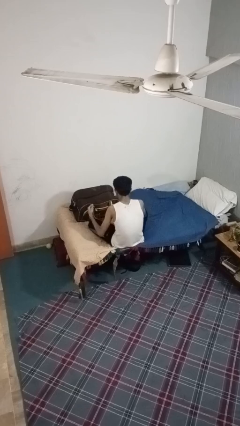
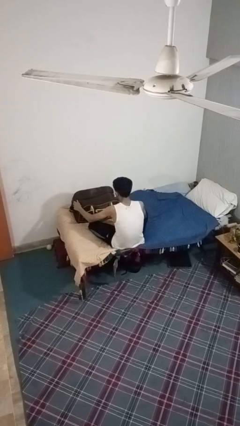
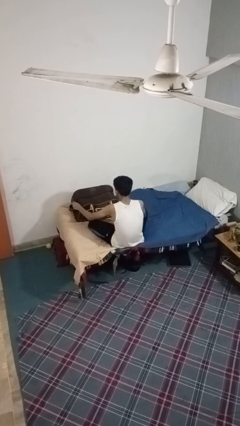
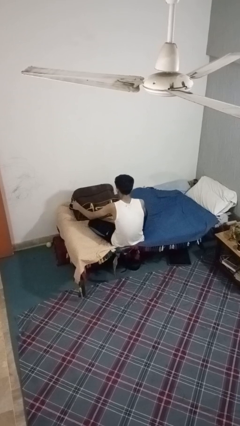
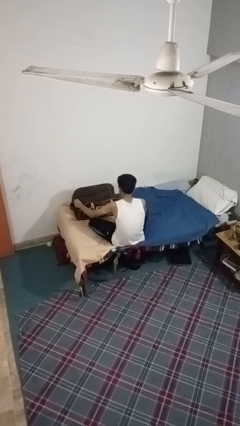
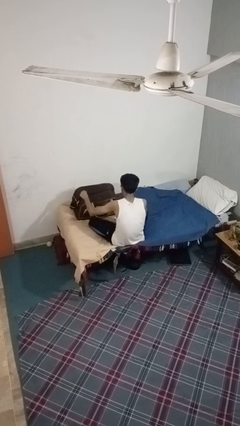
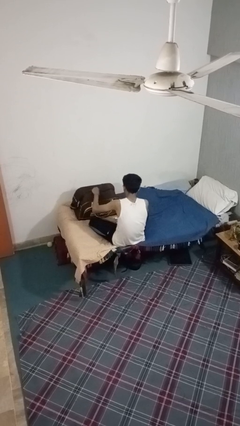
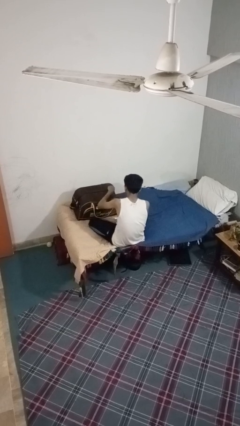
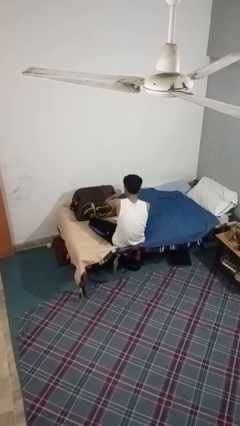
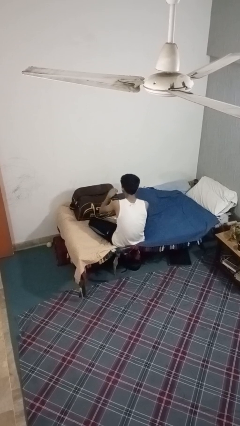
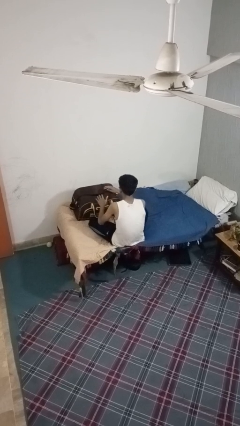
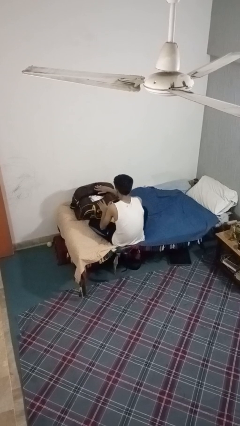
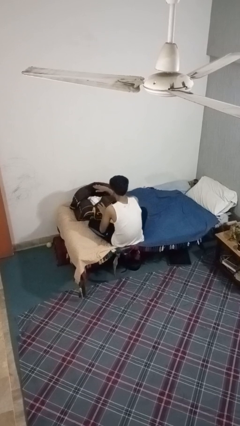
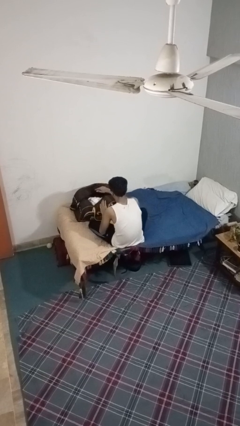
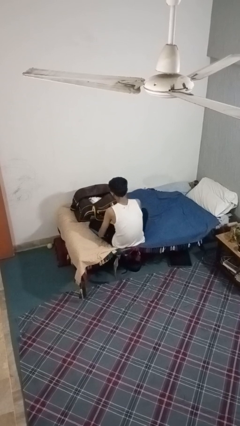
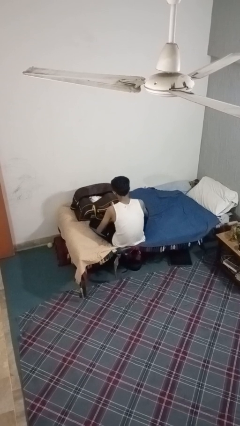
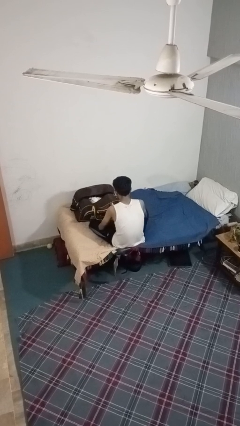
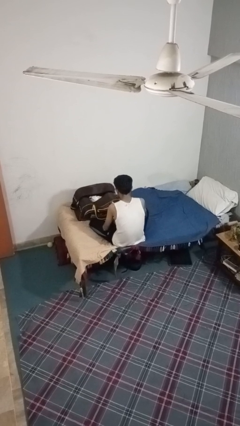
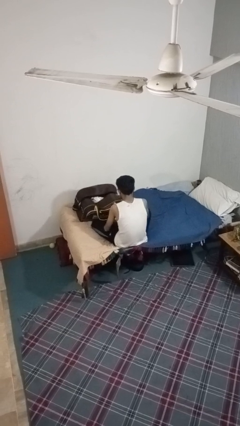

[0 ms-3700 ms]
person opens suitcase

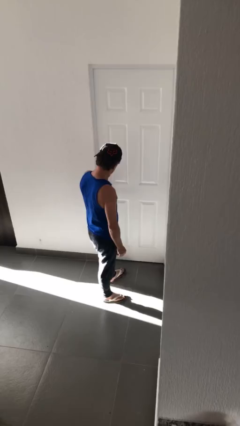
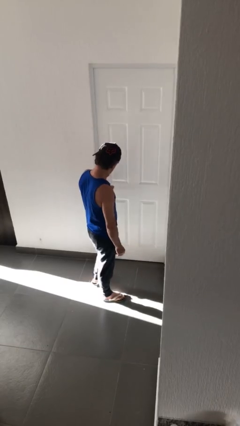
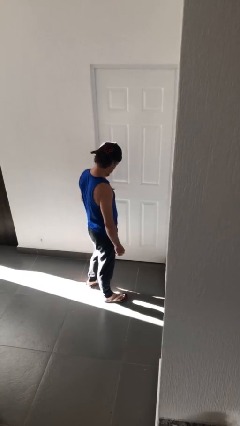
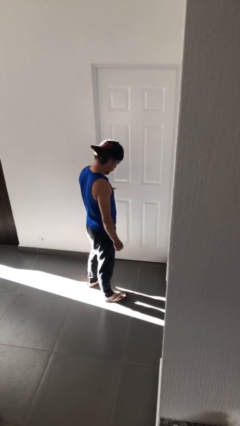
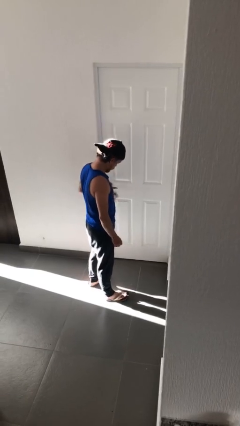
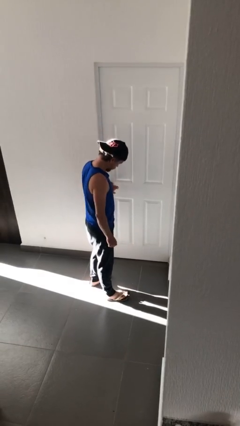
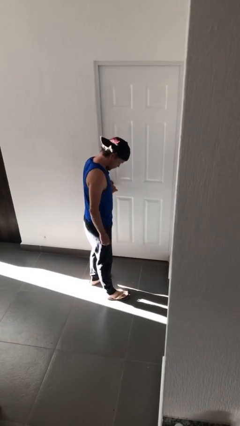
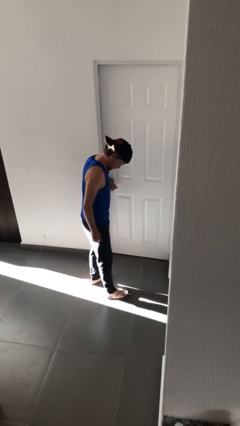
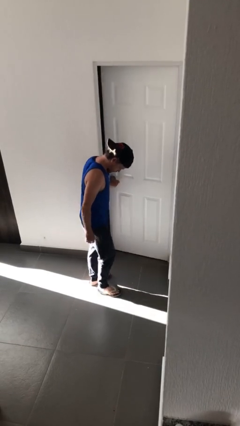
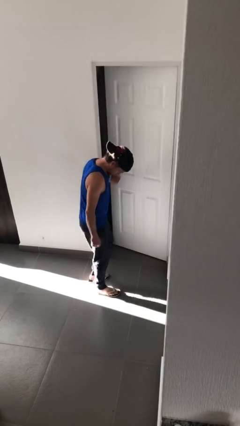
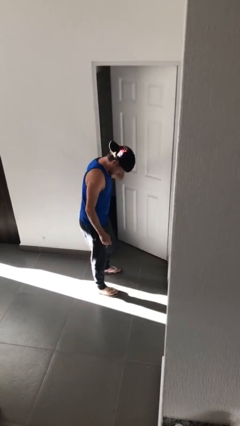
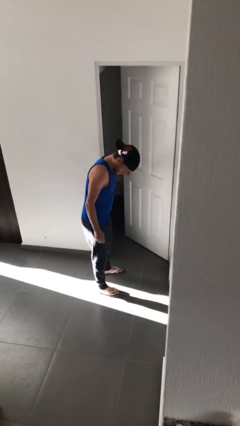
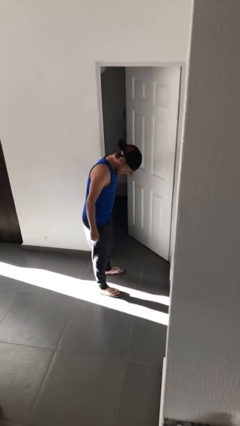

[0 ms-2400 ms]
person opens facility door

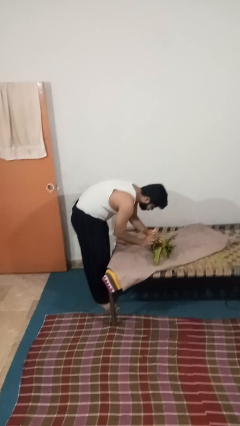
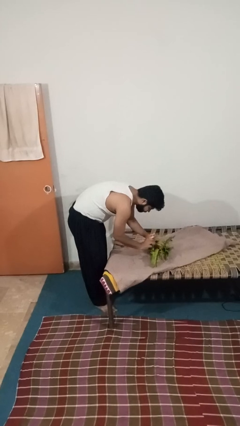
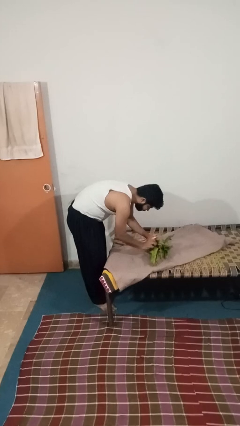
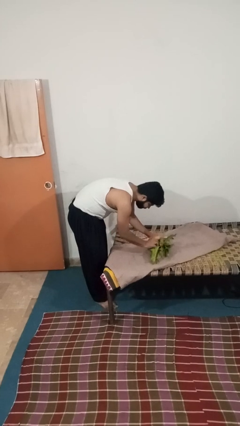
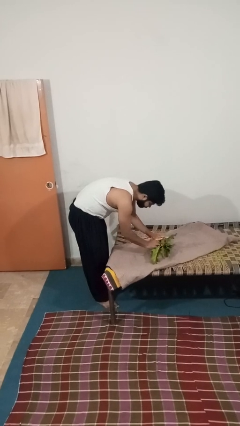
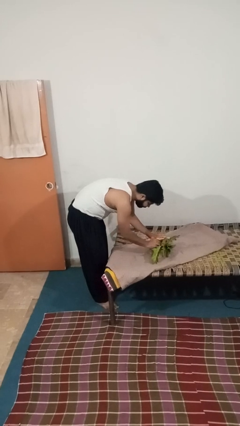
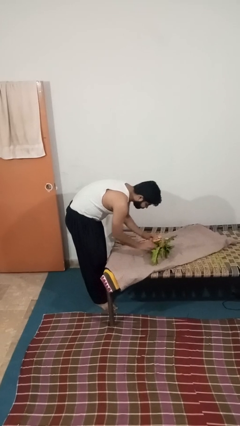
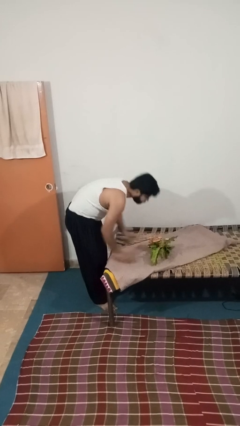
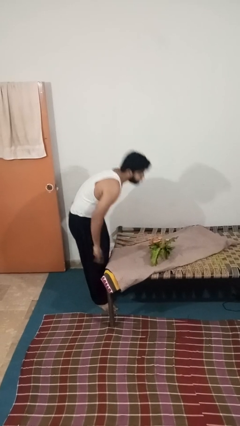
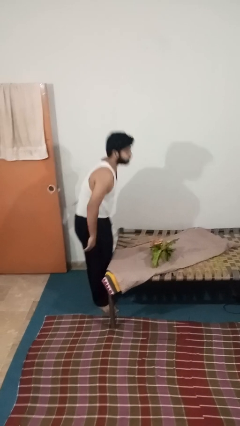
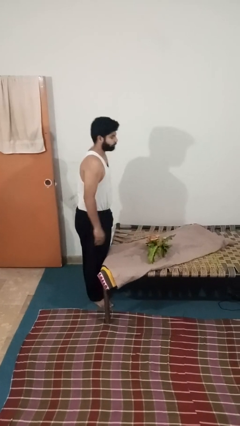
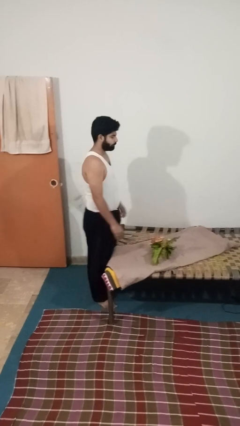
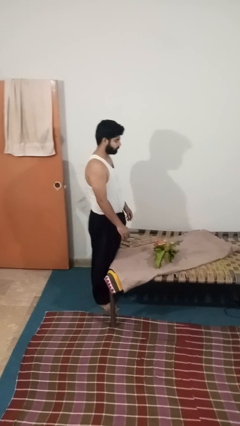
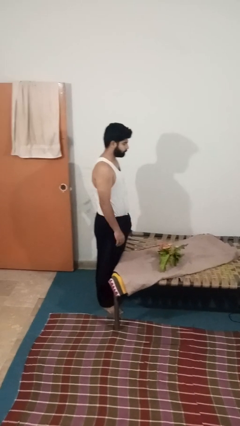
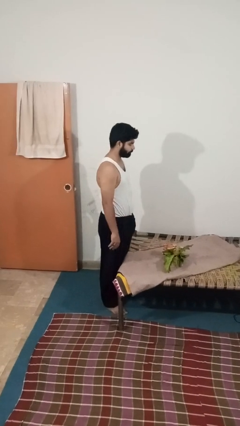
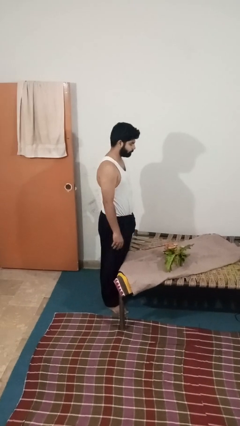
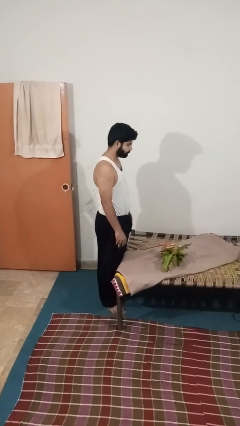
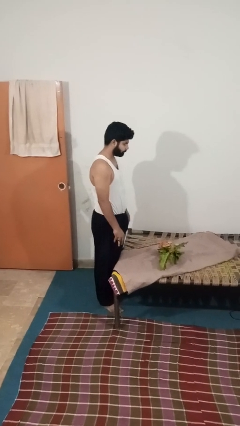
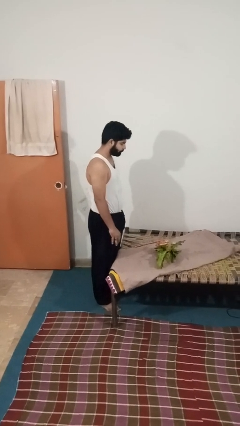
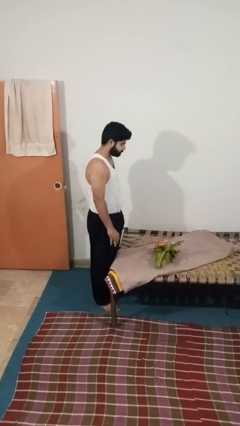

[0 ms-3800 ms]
person climbs off chair

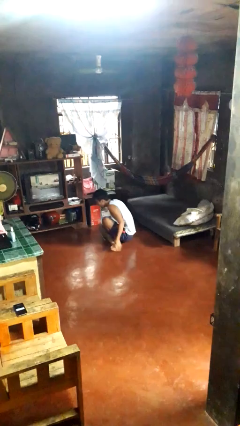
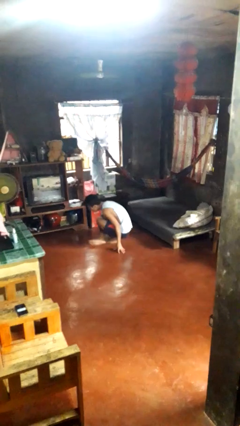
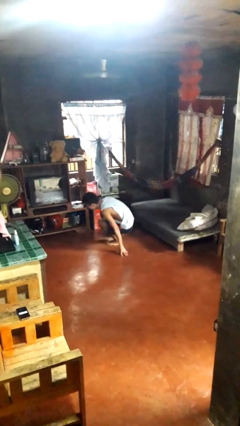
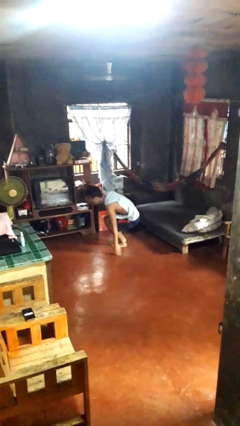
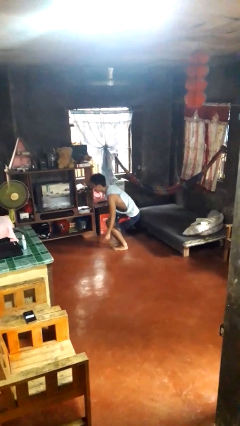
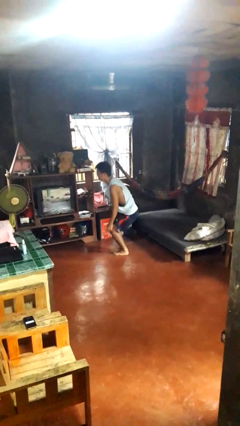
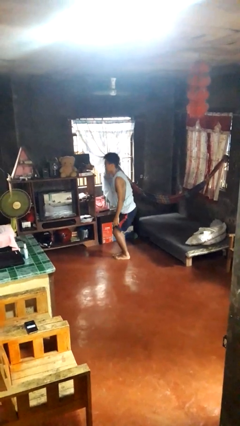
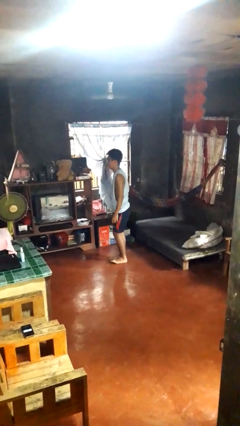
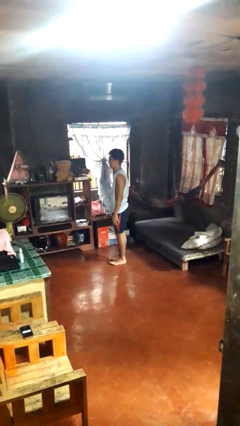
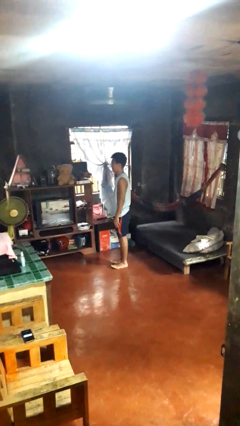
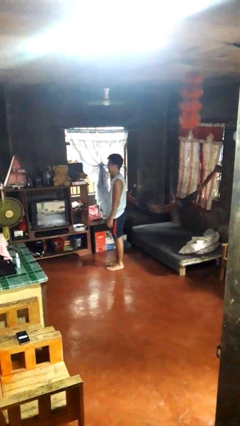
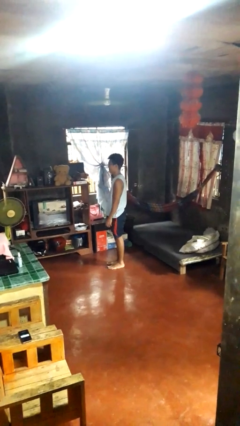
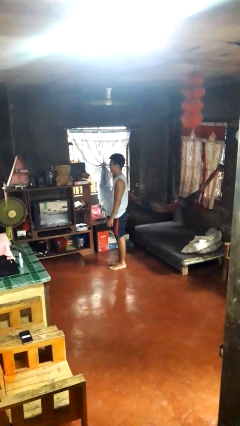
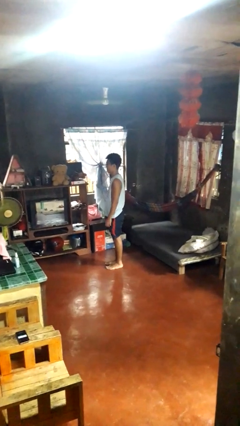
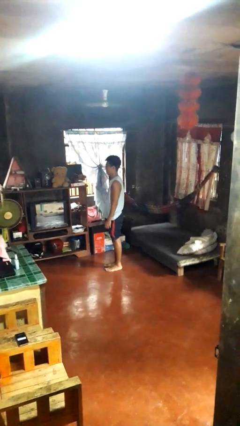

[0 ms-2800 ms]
person stands up from floor

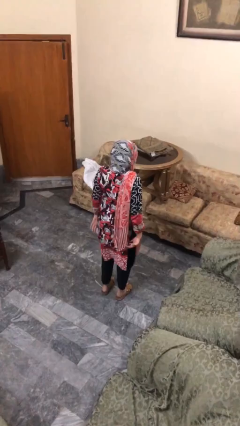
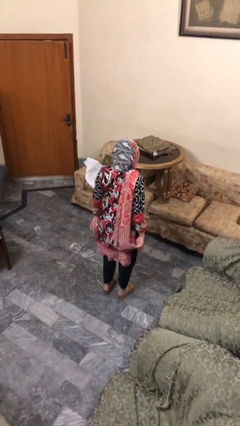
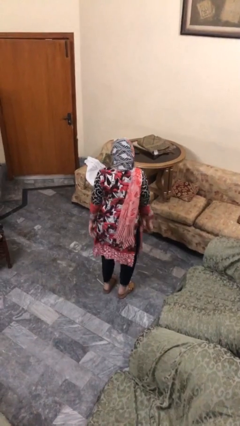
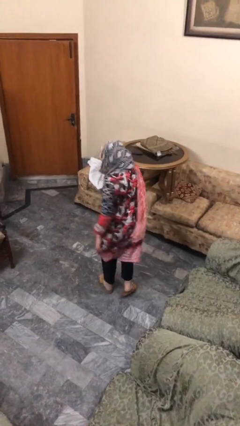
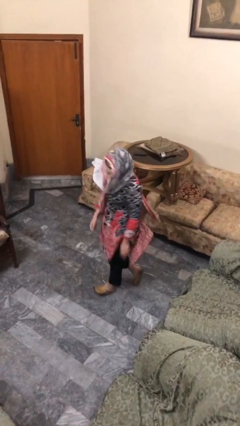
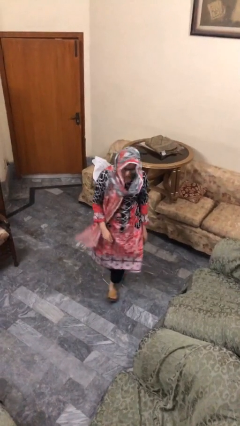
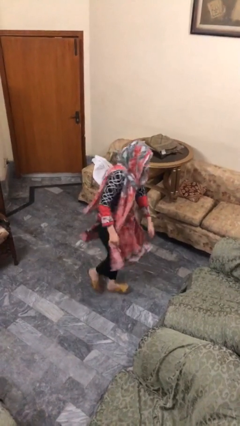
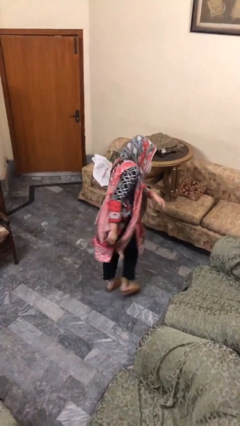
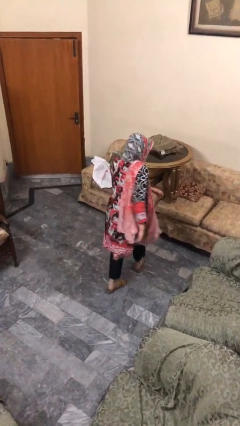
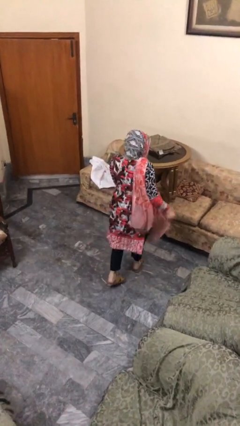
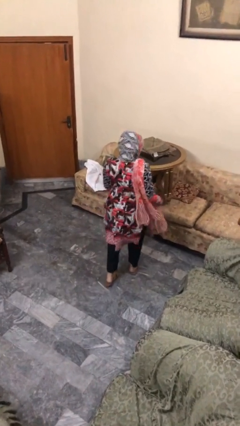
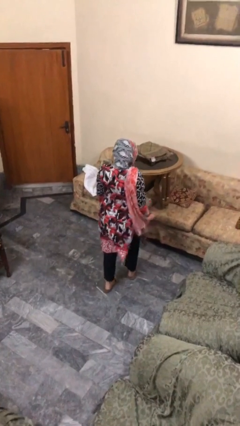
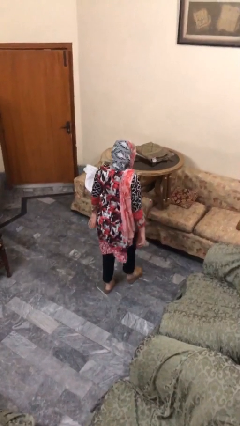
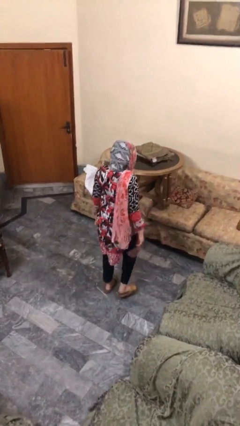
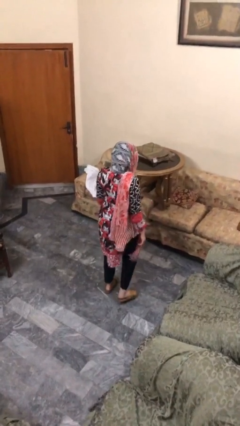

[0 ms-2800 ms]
person twirls

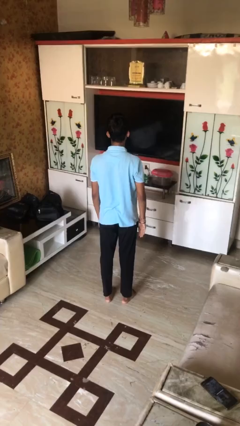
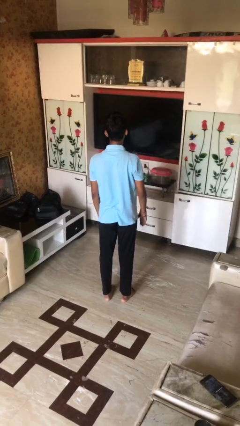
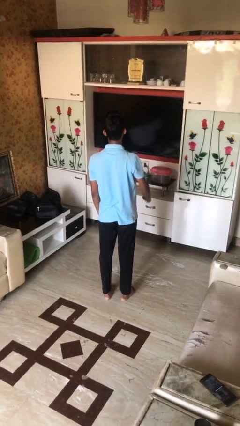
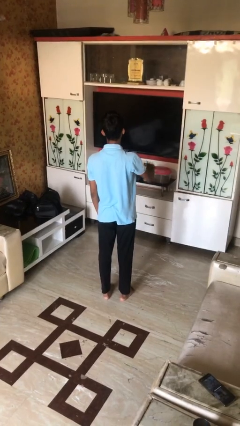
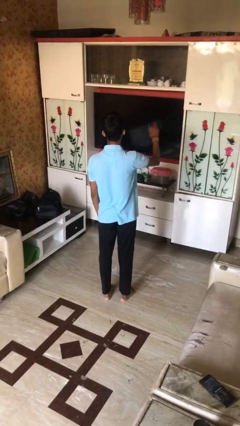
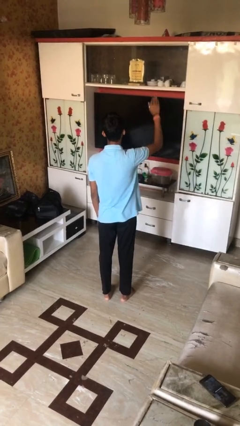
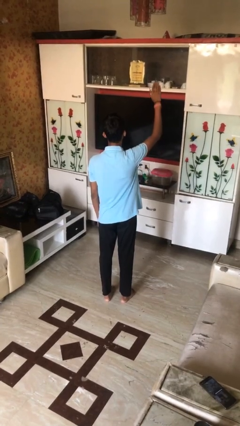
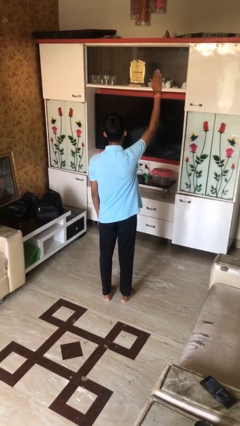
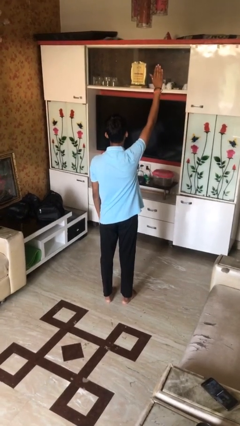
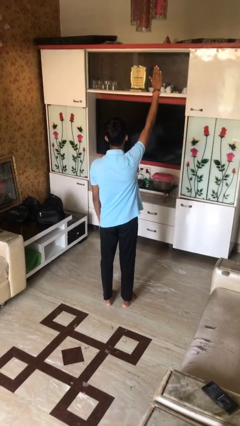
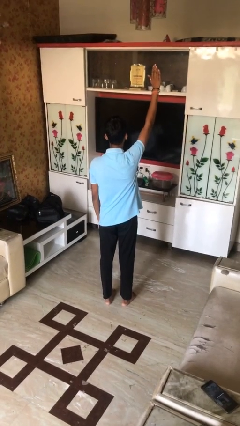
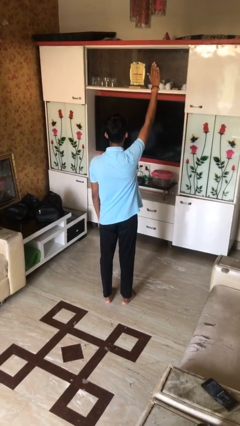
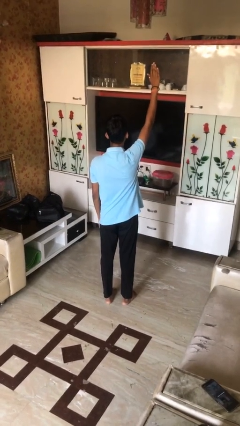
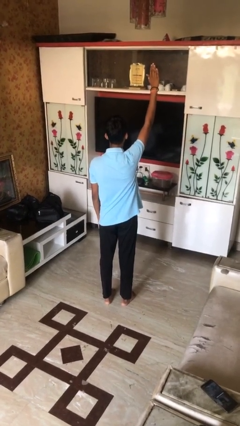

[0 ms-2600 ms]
person gestures raise hand
